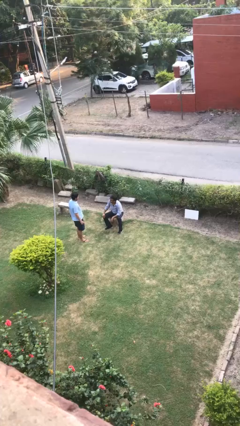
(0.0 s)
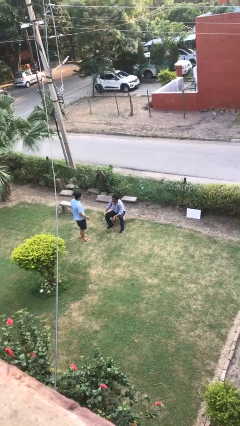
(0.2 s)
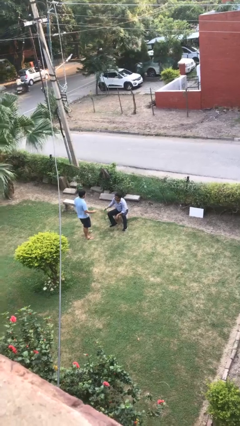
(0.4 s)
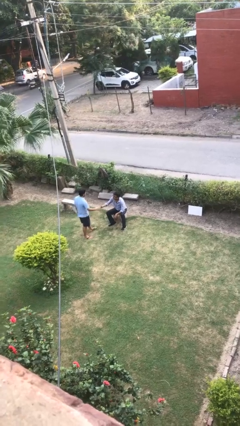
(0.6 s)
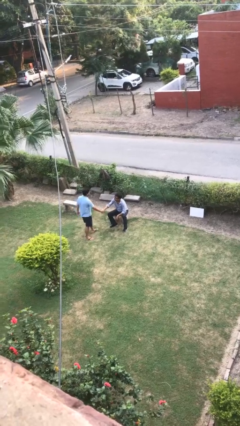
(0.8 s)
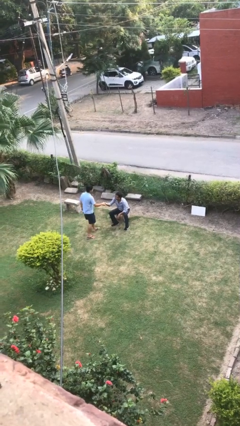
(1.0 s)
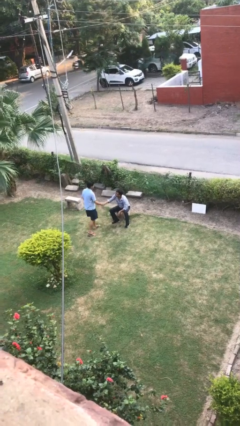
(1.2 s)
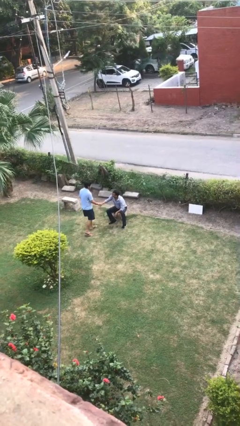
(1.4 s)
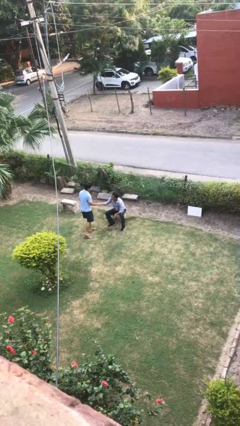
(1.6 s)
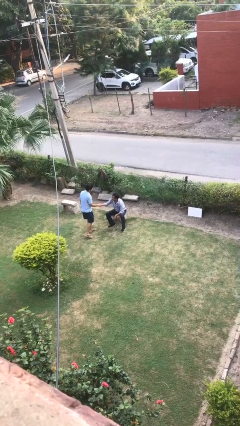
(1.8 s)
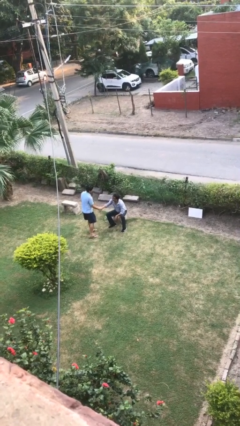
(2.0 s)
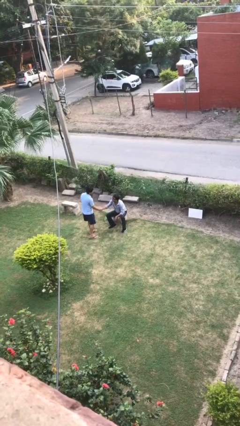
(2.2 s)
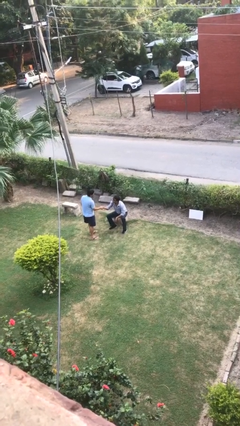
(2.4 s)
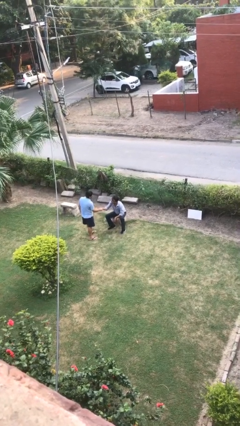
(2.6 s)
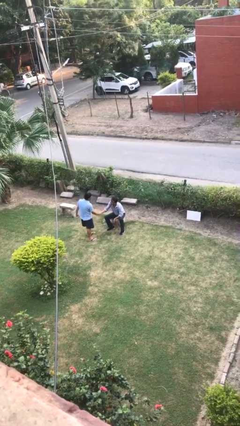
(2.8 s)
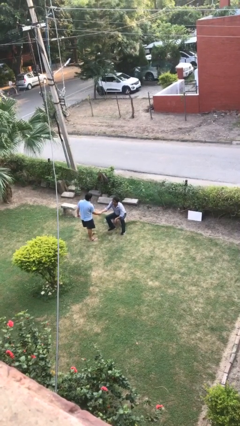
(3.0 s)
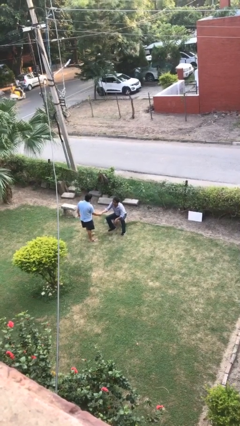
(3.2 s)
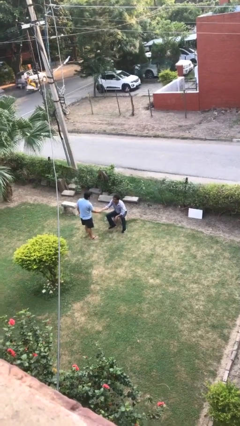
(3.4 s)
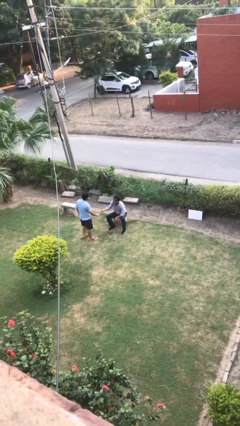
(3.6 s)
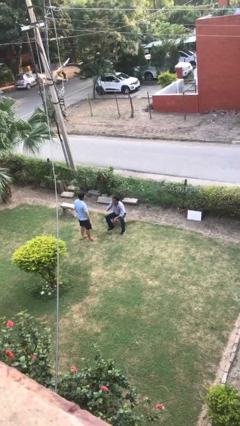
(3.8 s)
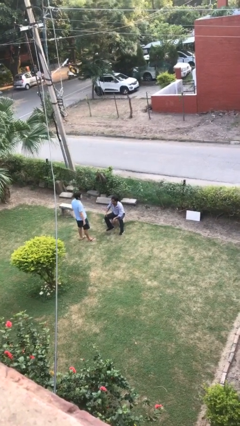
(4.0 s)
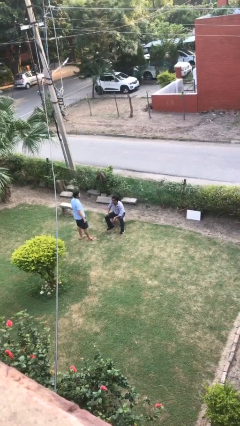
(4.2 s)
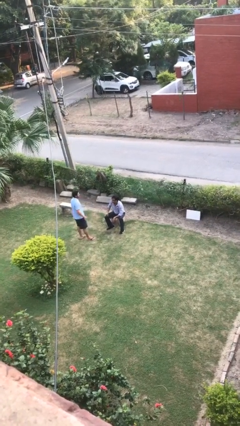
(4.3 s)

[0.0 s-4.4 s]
person shakes hand

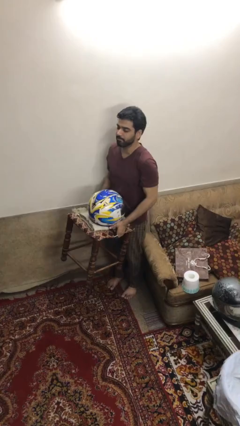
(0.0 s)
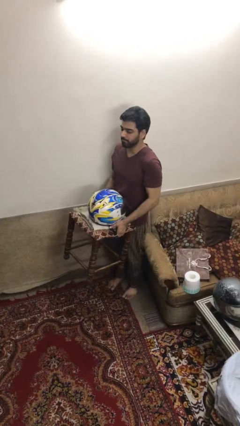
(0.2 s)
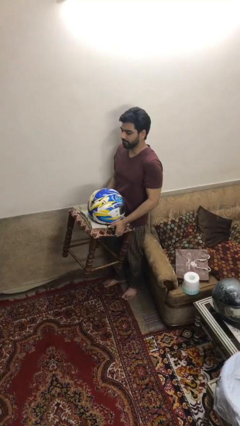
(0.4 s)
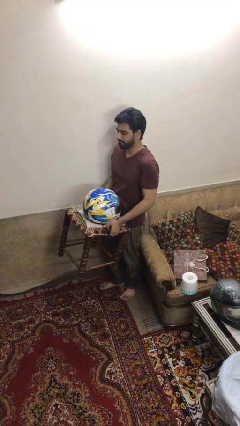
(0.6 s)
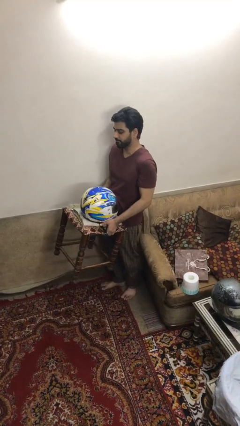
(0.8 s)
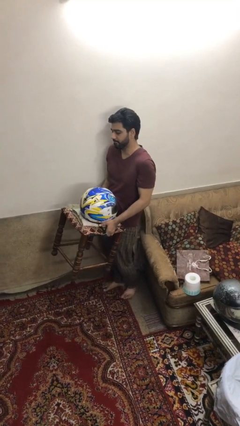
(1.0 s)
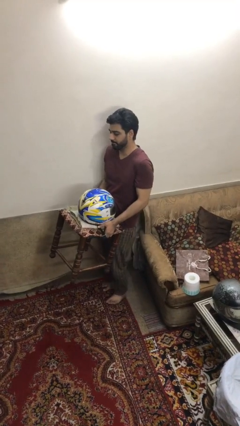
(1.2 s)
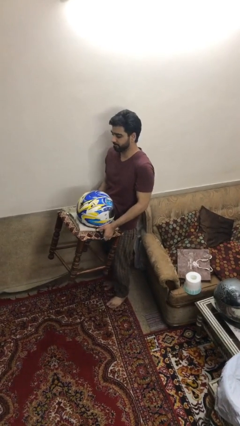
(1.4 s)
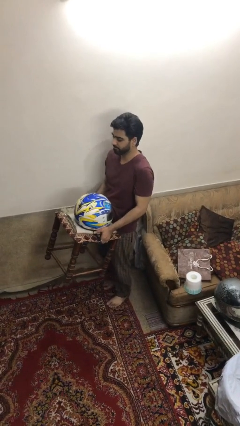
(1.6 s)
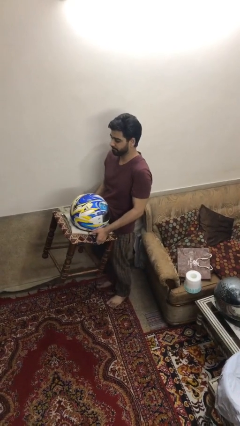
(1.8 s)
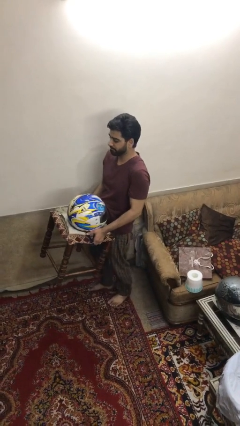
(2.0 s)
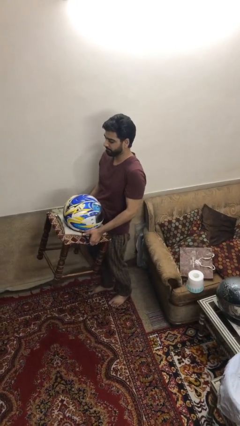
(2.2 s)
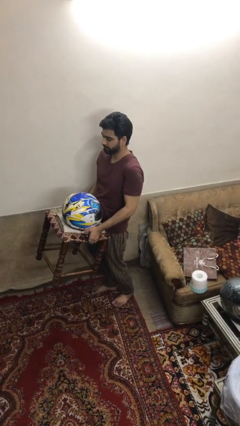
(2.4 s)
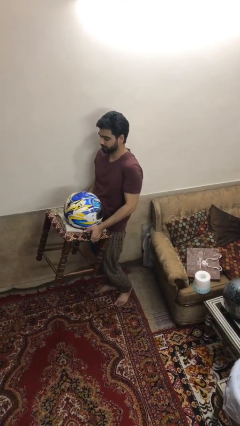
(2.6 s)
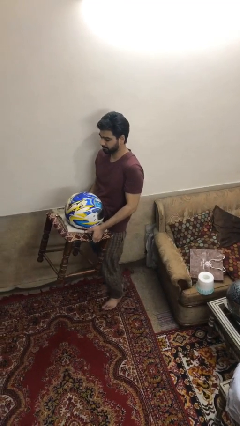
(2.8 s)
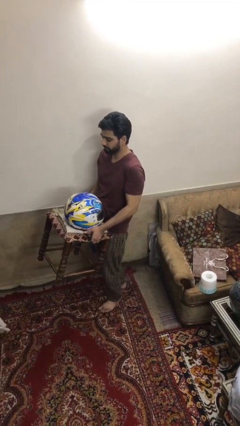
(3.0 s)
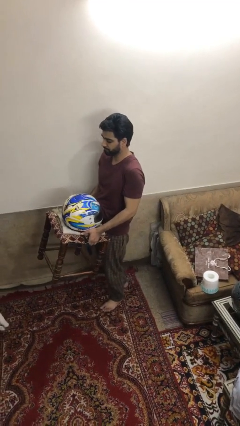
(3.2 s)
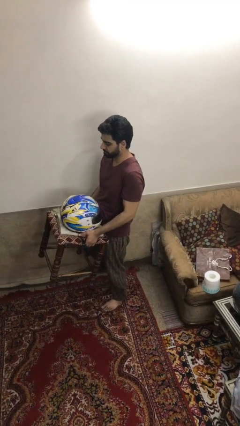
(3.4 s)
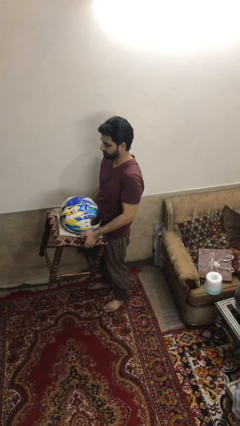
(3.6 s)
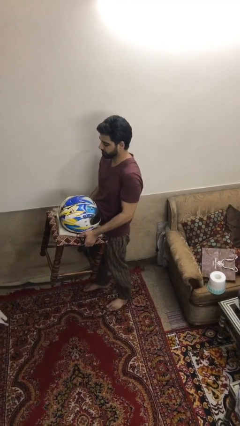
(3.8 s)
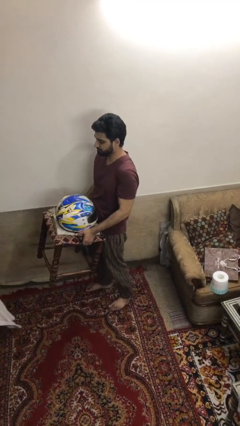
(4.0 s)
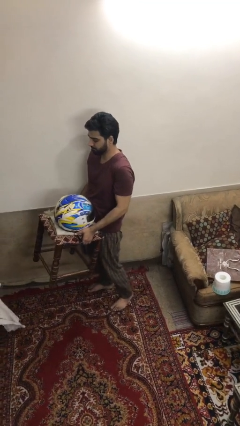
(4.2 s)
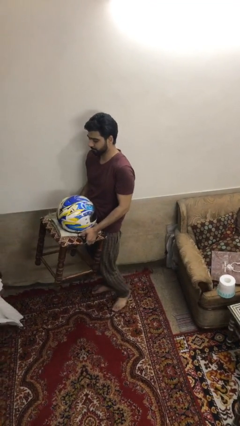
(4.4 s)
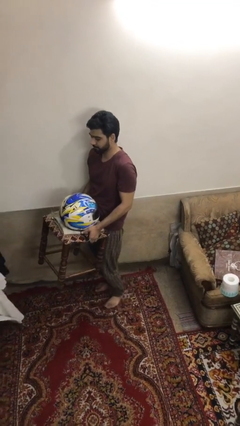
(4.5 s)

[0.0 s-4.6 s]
person carries heavy object

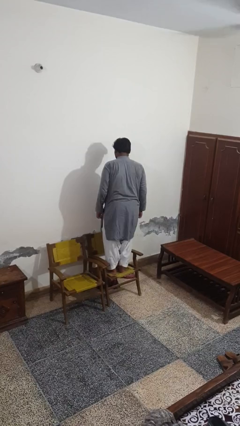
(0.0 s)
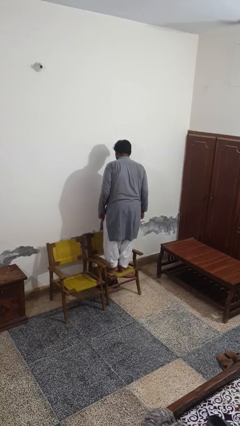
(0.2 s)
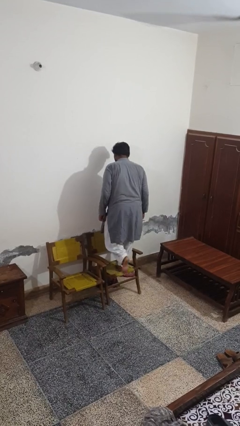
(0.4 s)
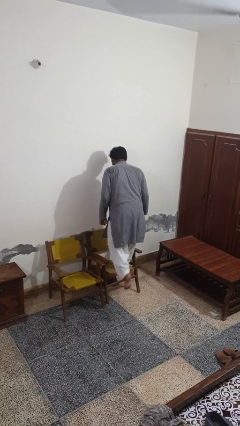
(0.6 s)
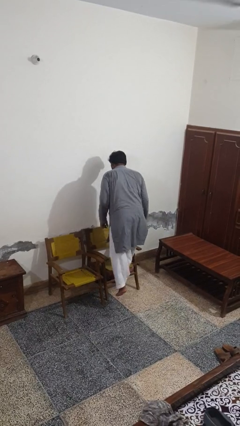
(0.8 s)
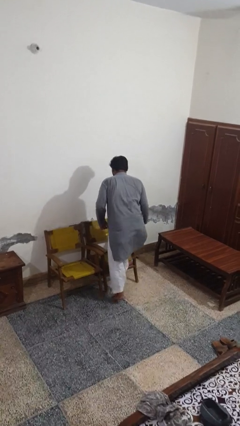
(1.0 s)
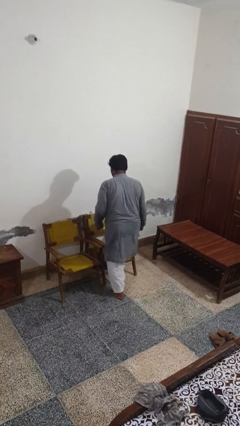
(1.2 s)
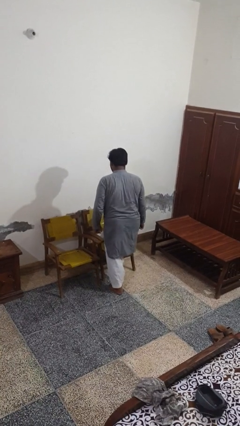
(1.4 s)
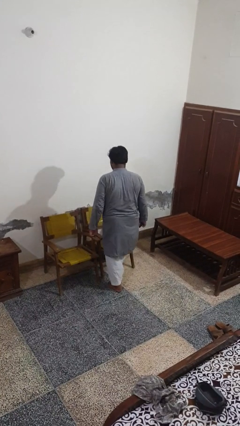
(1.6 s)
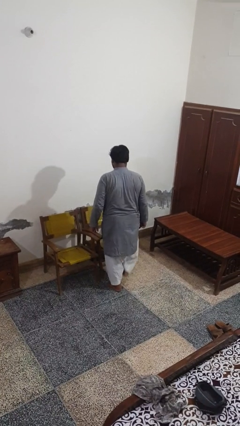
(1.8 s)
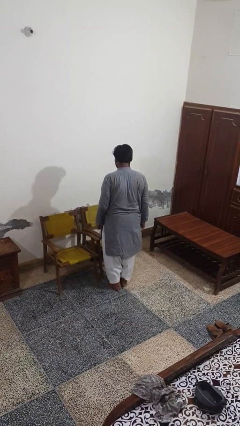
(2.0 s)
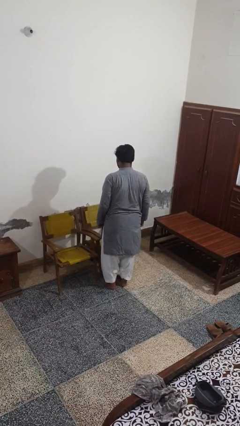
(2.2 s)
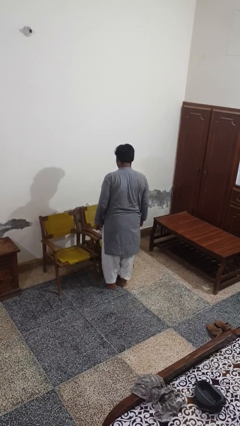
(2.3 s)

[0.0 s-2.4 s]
person climbs off chair

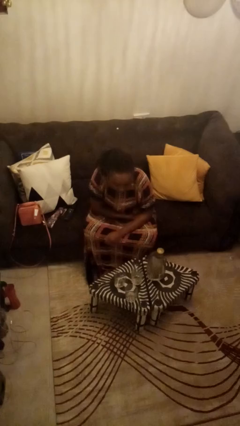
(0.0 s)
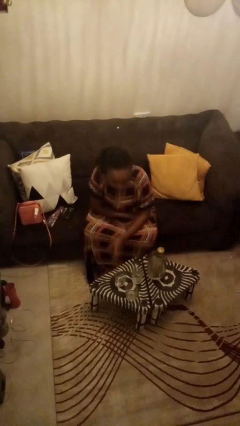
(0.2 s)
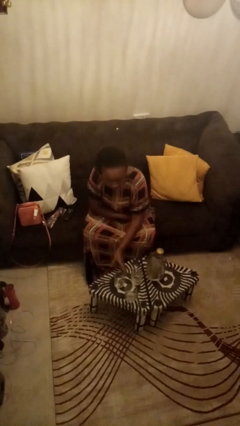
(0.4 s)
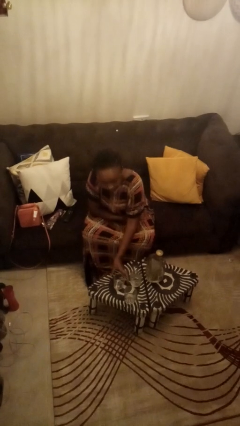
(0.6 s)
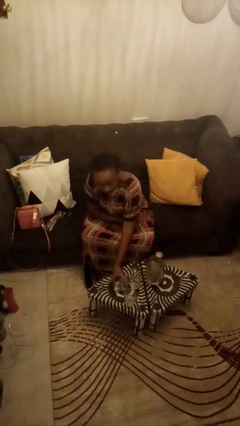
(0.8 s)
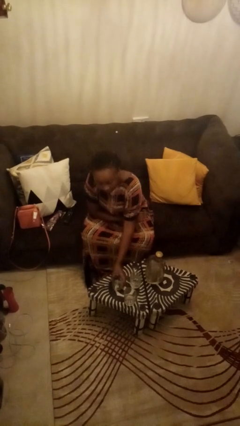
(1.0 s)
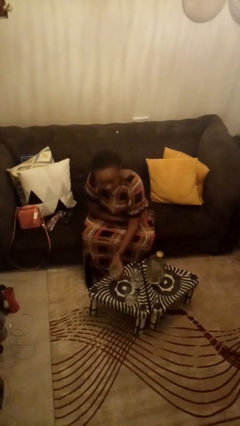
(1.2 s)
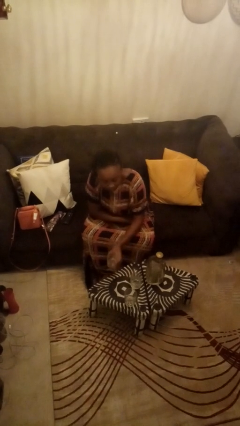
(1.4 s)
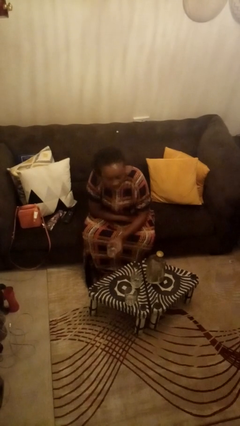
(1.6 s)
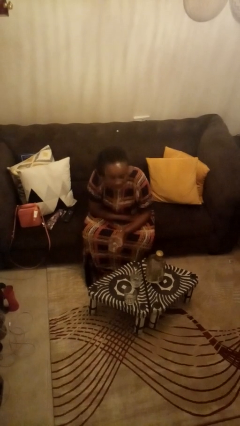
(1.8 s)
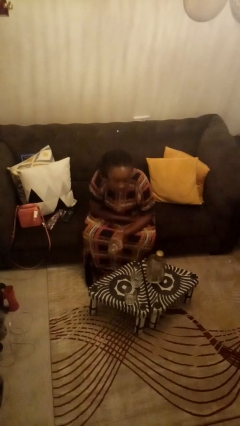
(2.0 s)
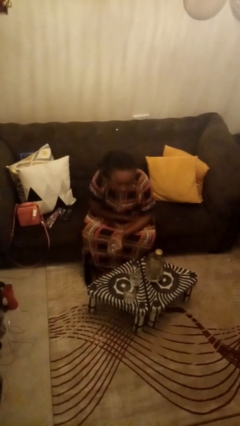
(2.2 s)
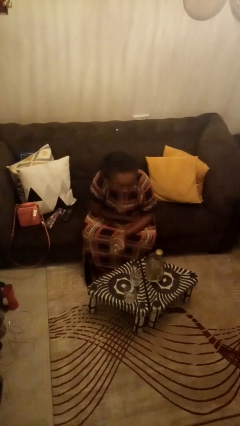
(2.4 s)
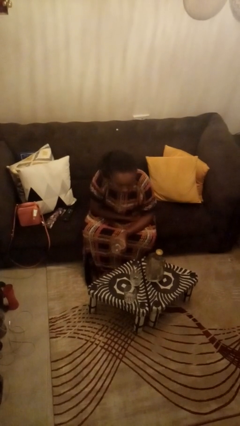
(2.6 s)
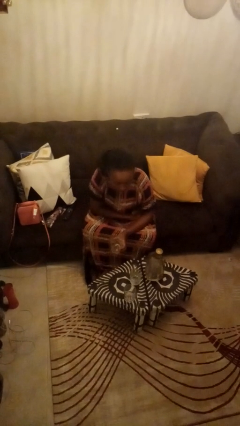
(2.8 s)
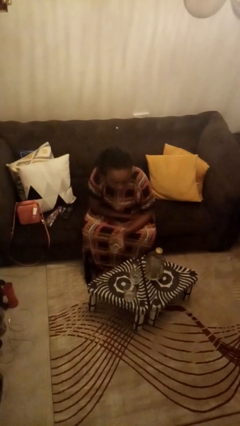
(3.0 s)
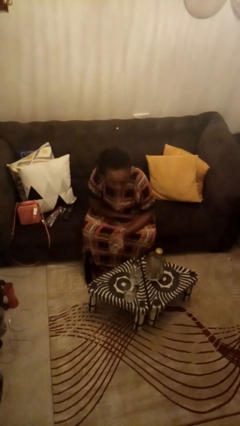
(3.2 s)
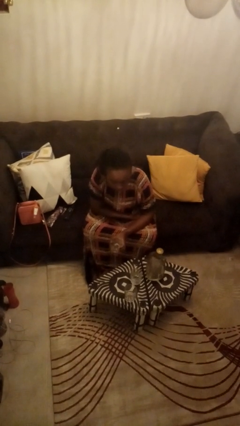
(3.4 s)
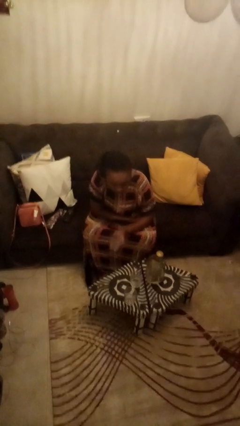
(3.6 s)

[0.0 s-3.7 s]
person picks up object from table

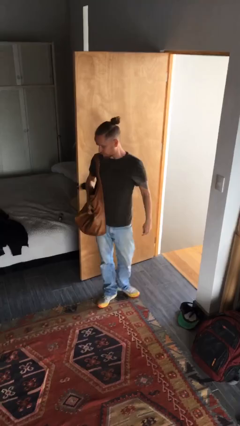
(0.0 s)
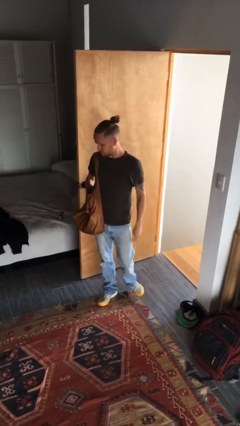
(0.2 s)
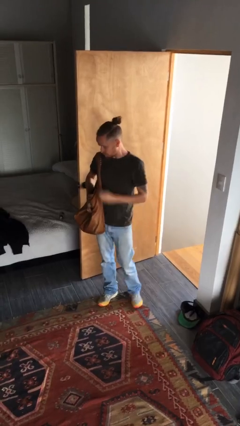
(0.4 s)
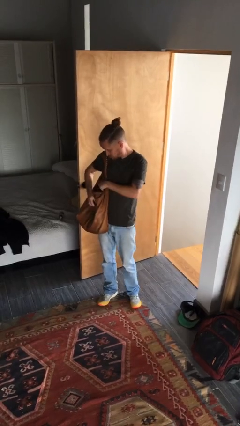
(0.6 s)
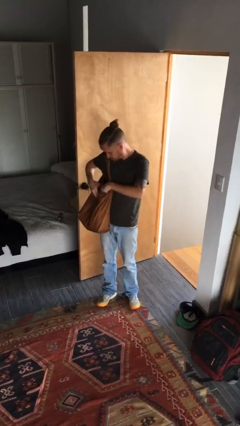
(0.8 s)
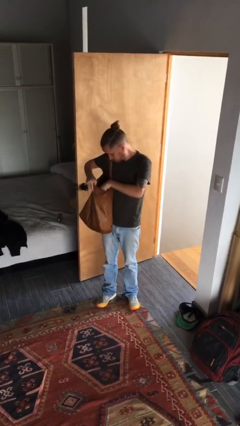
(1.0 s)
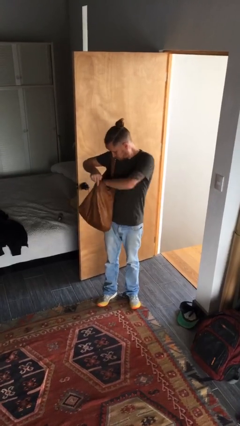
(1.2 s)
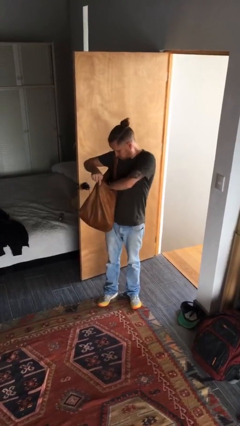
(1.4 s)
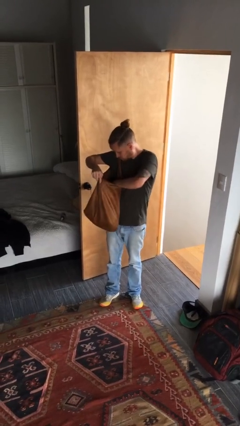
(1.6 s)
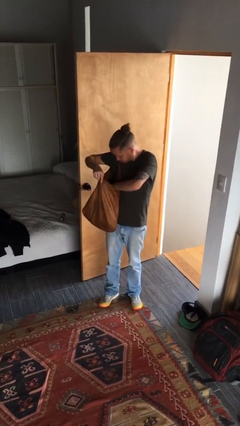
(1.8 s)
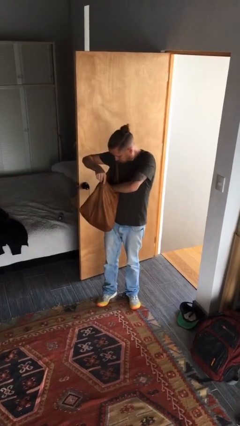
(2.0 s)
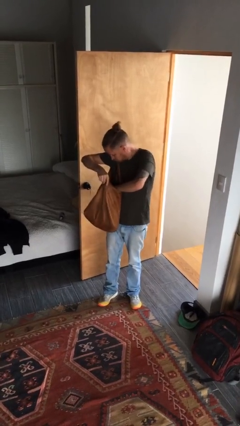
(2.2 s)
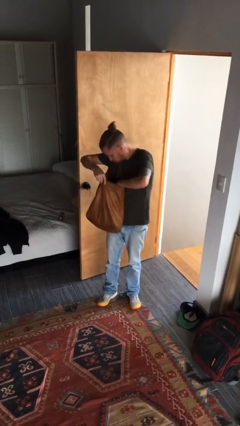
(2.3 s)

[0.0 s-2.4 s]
person searches in purse

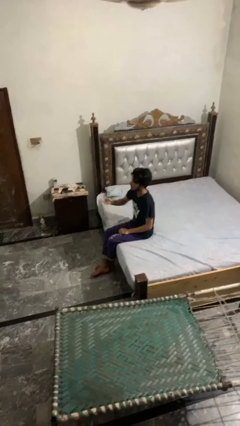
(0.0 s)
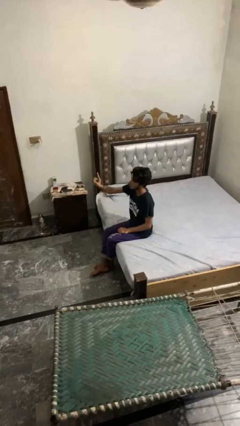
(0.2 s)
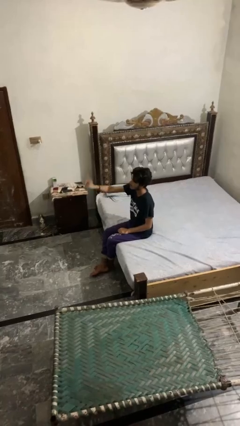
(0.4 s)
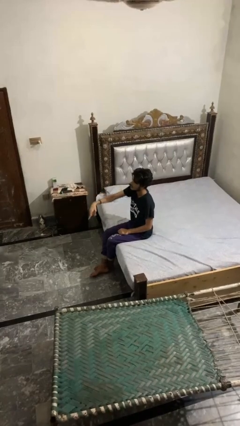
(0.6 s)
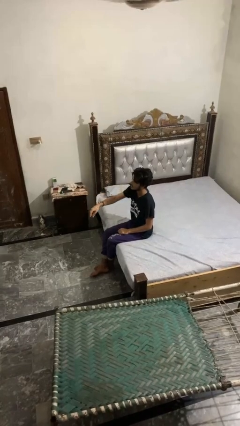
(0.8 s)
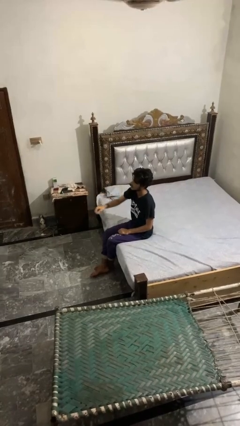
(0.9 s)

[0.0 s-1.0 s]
person gestures swipe down
